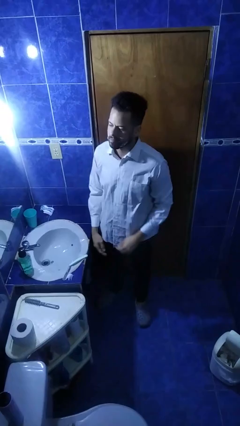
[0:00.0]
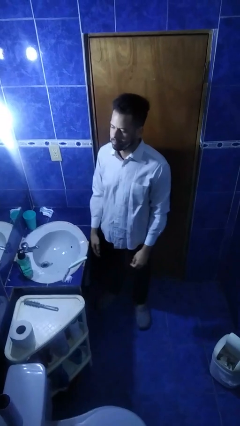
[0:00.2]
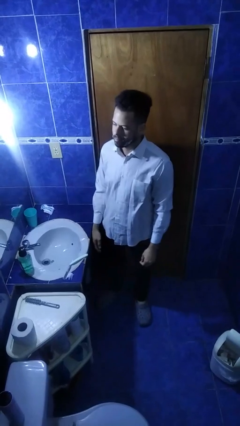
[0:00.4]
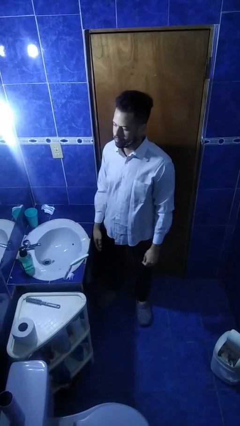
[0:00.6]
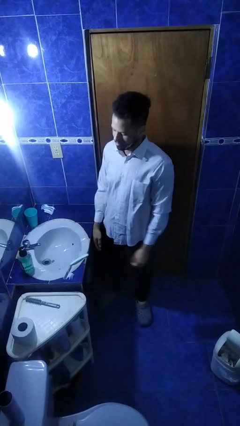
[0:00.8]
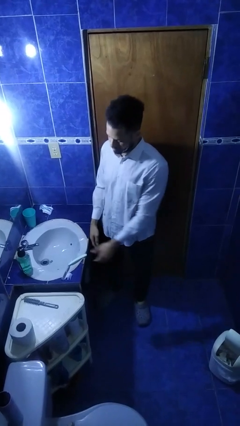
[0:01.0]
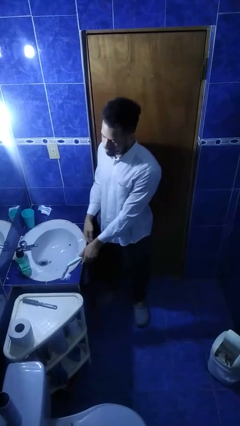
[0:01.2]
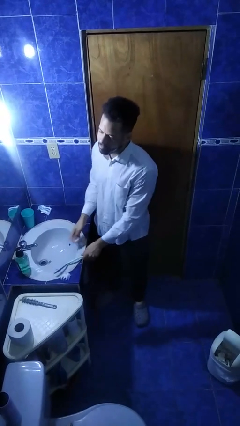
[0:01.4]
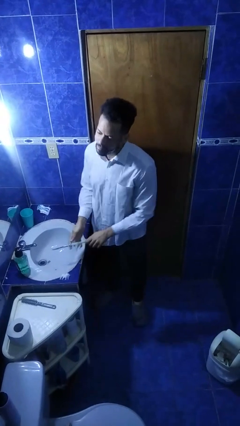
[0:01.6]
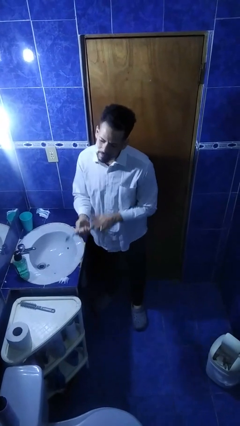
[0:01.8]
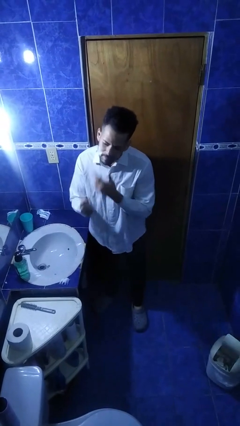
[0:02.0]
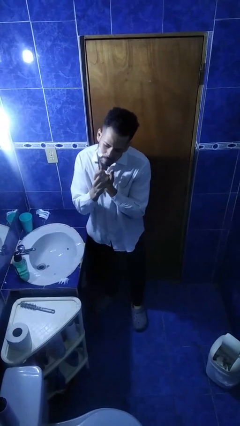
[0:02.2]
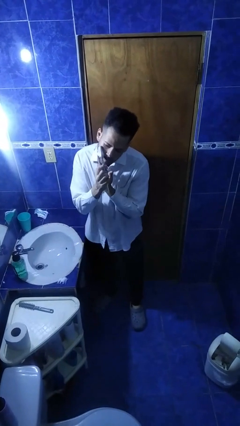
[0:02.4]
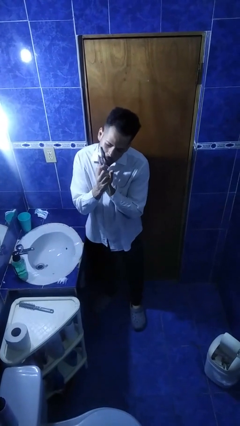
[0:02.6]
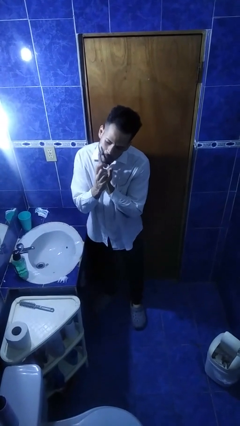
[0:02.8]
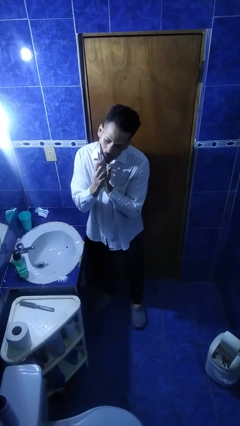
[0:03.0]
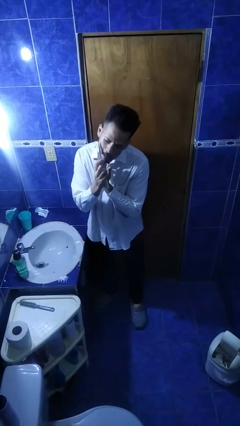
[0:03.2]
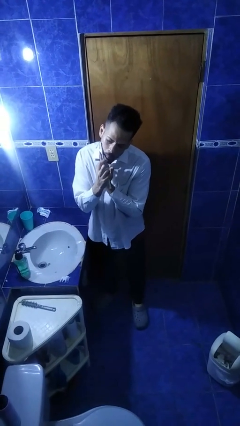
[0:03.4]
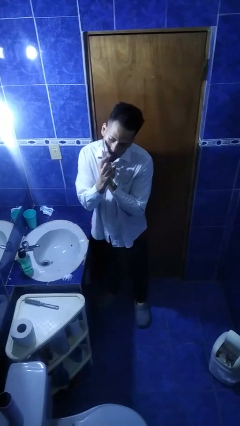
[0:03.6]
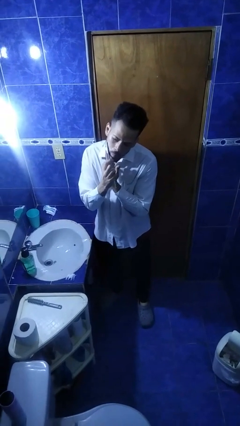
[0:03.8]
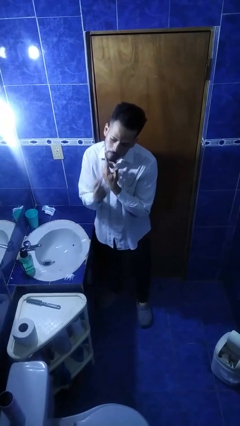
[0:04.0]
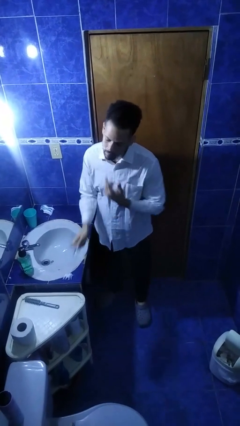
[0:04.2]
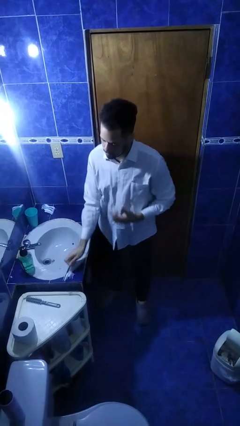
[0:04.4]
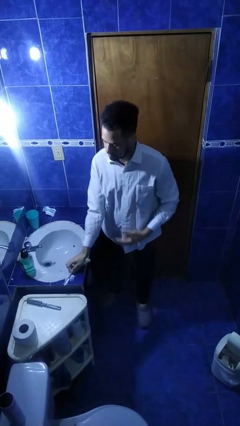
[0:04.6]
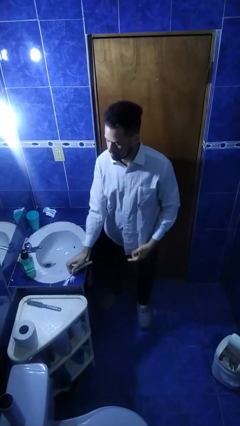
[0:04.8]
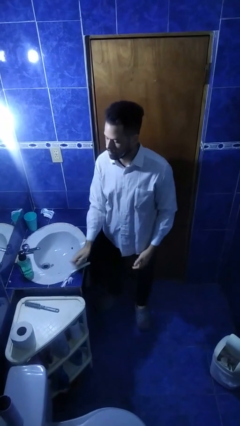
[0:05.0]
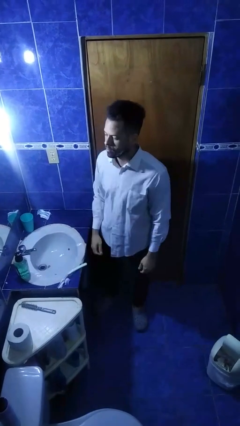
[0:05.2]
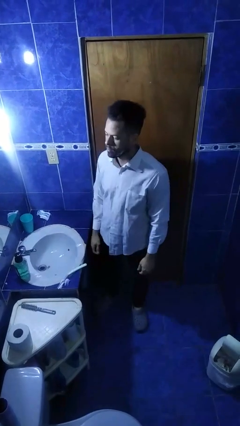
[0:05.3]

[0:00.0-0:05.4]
person shaves face

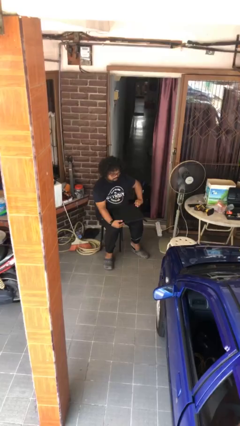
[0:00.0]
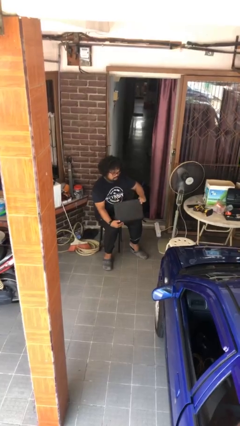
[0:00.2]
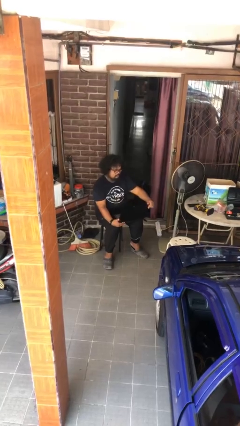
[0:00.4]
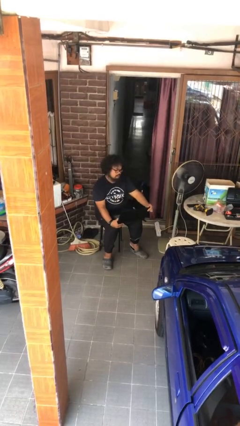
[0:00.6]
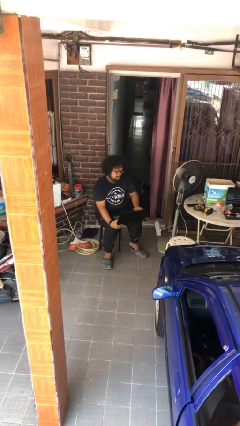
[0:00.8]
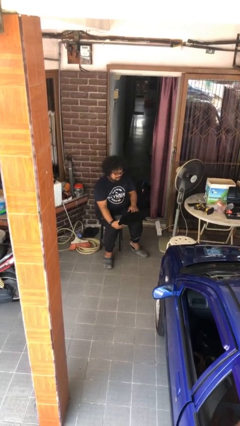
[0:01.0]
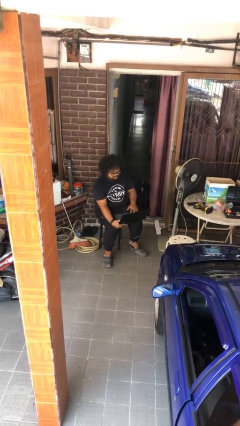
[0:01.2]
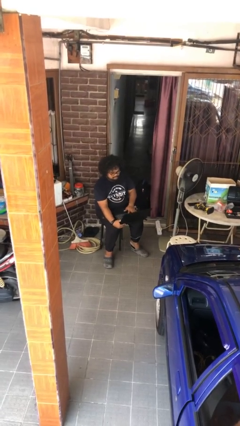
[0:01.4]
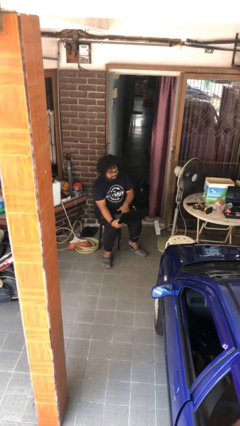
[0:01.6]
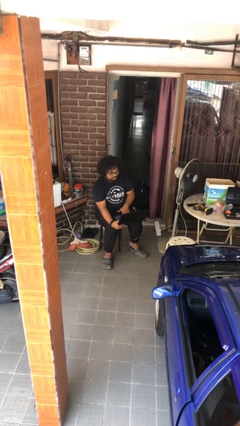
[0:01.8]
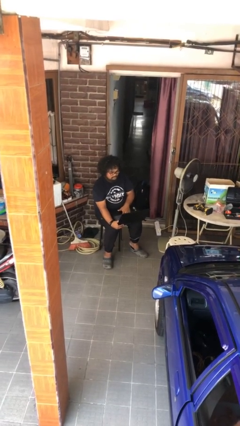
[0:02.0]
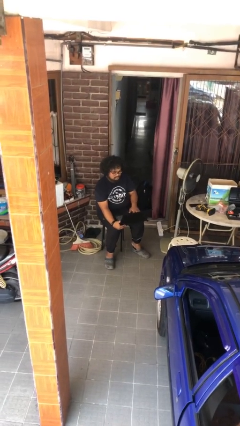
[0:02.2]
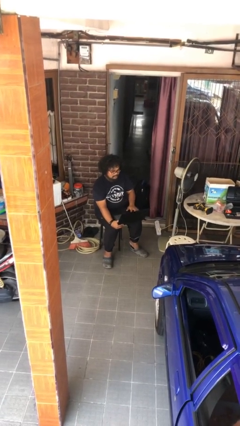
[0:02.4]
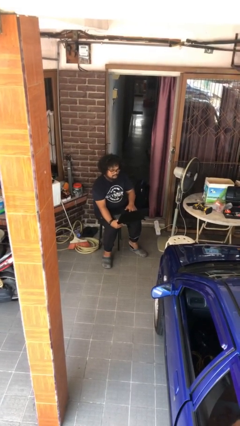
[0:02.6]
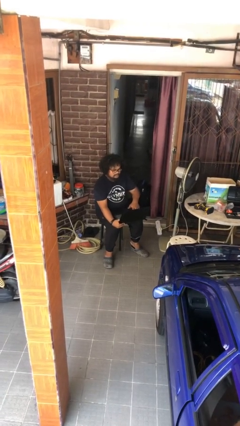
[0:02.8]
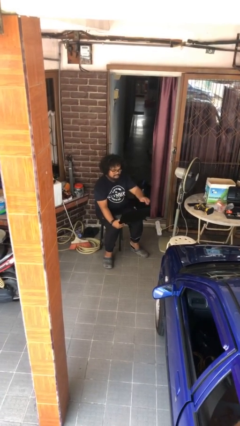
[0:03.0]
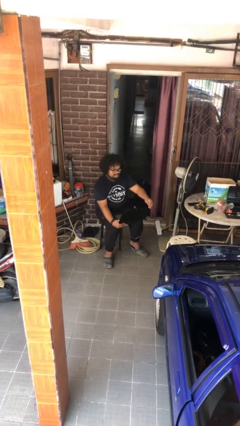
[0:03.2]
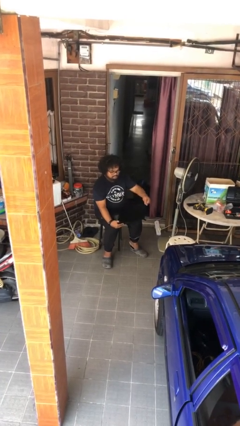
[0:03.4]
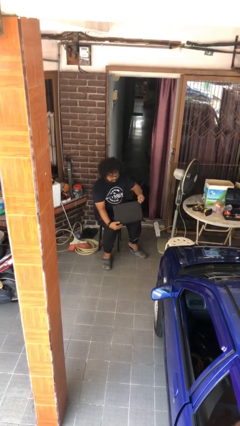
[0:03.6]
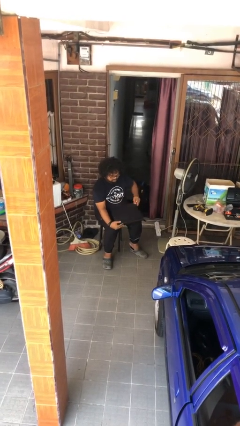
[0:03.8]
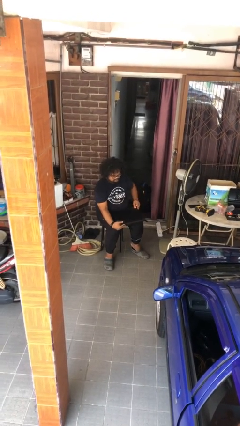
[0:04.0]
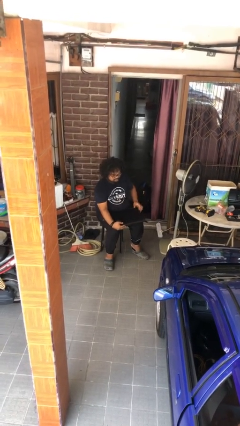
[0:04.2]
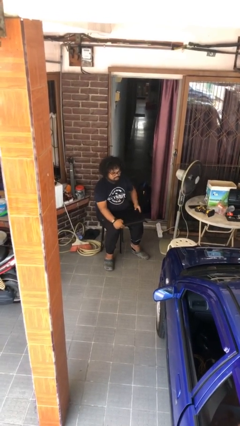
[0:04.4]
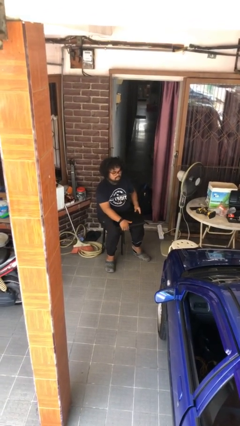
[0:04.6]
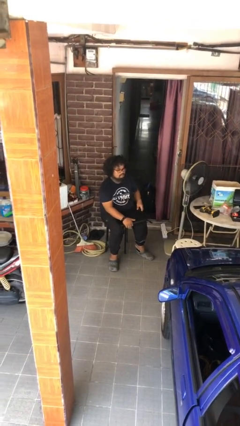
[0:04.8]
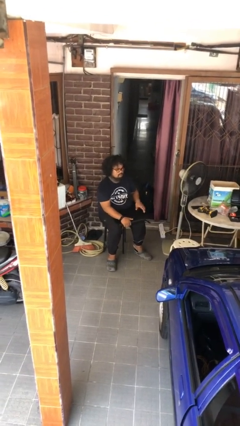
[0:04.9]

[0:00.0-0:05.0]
person interacts with laptop

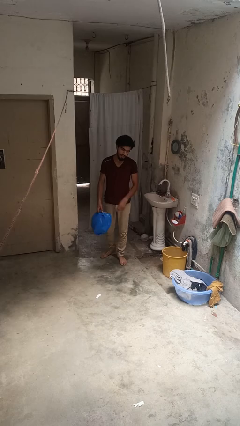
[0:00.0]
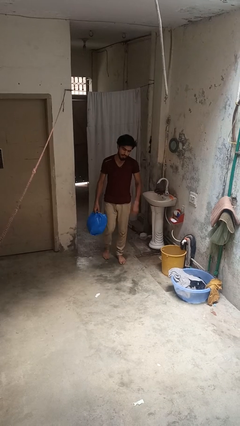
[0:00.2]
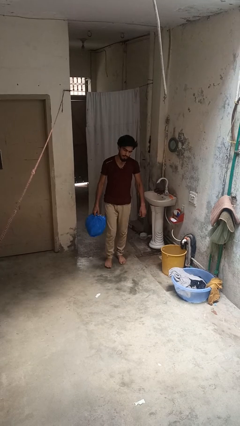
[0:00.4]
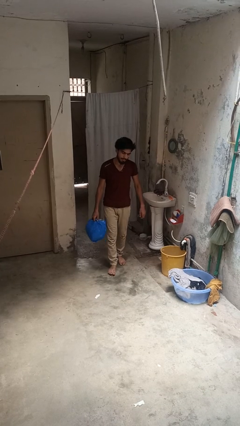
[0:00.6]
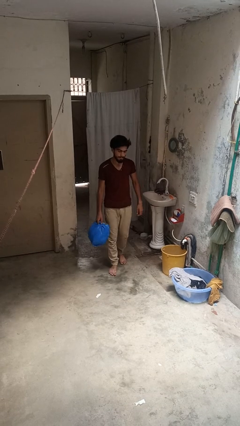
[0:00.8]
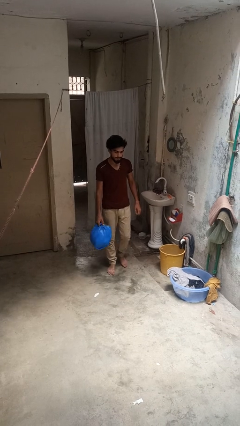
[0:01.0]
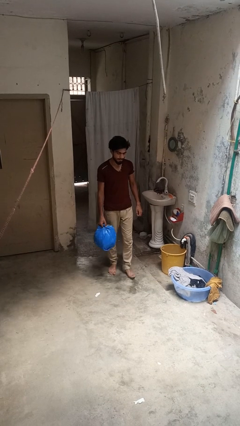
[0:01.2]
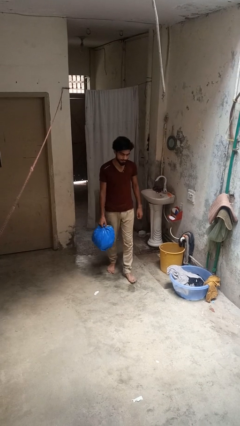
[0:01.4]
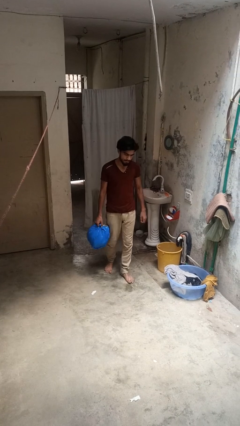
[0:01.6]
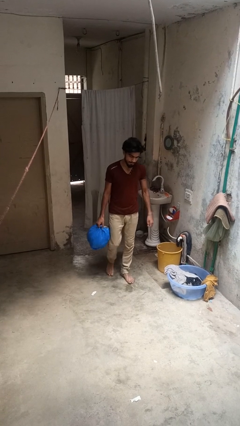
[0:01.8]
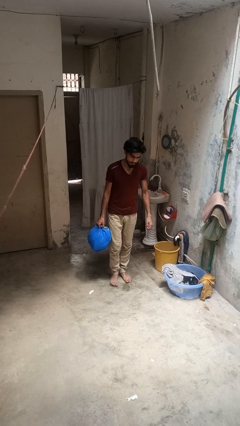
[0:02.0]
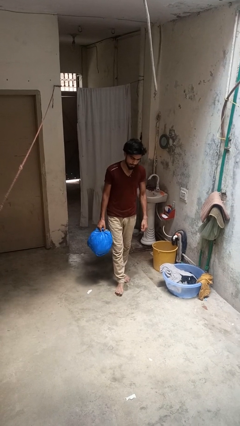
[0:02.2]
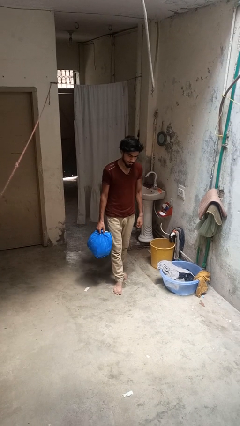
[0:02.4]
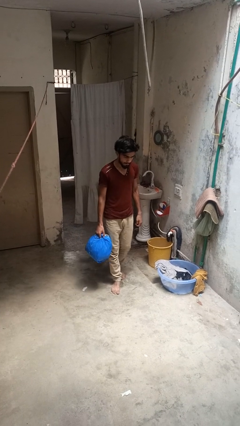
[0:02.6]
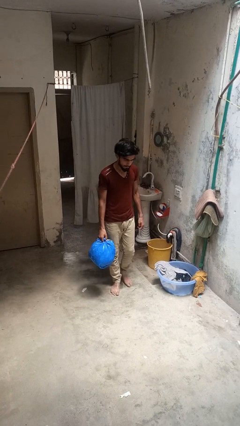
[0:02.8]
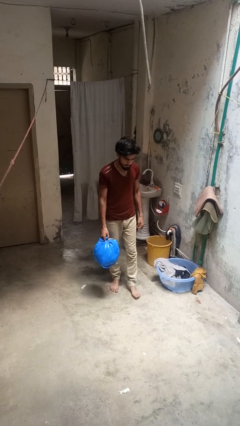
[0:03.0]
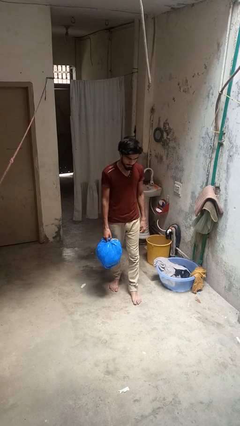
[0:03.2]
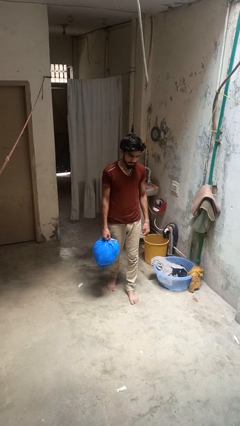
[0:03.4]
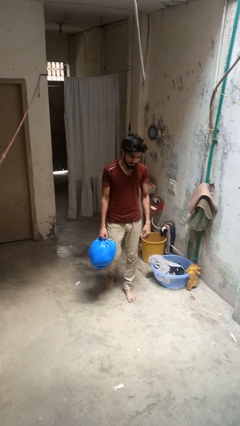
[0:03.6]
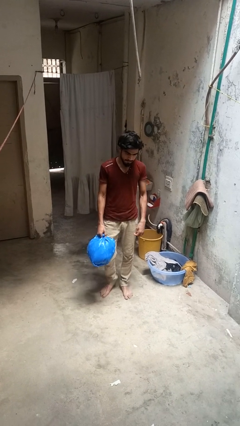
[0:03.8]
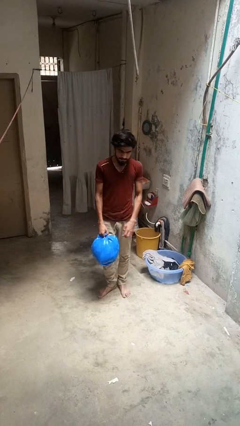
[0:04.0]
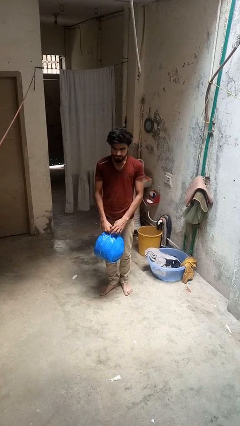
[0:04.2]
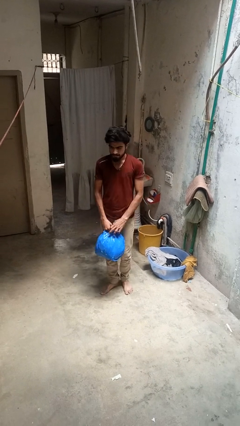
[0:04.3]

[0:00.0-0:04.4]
person carries groceries

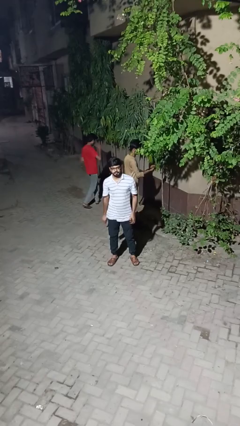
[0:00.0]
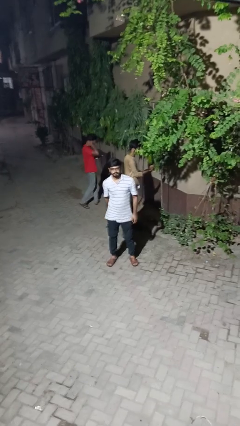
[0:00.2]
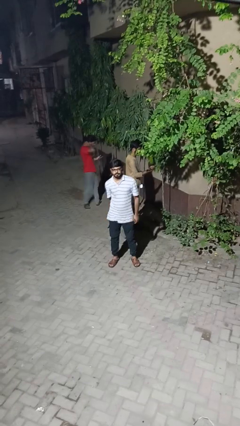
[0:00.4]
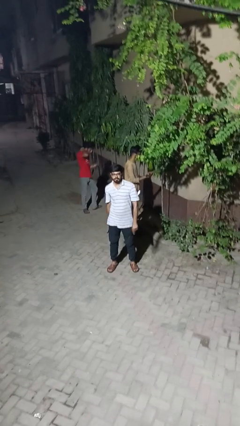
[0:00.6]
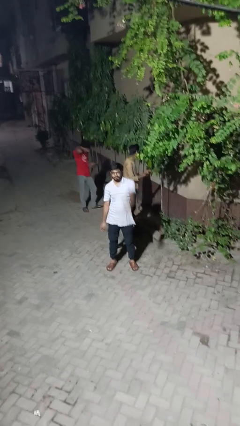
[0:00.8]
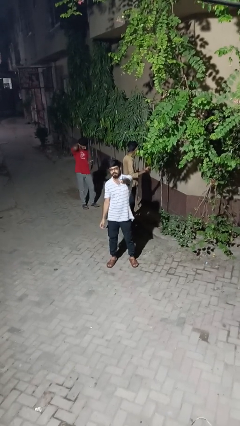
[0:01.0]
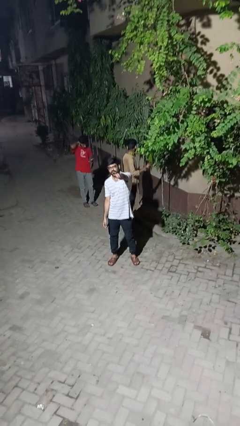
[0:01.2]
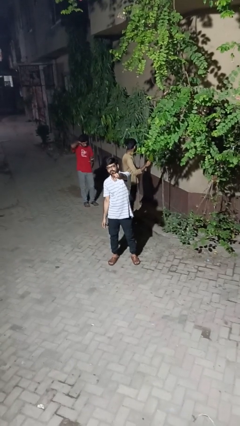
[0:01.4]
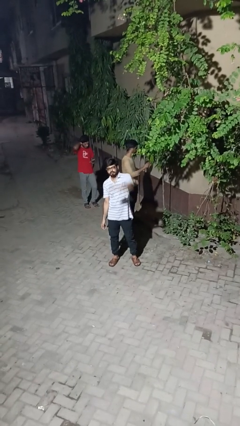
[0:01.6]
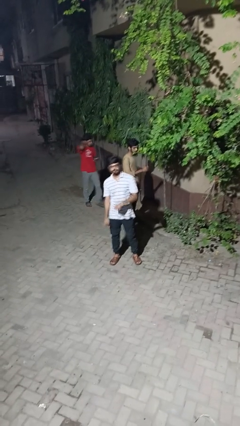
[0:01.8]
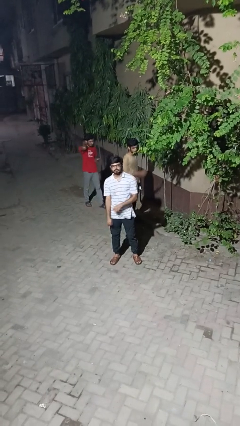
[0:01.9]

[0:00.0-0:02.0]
person points at person

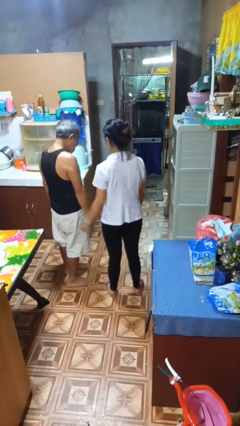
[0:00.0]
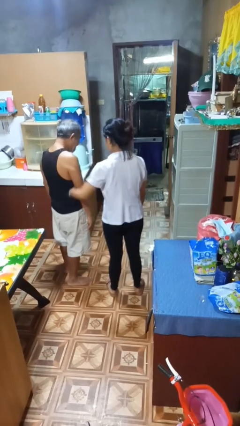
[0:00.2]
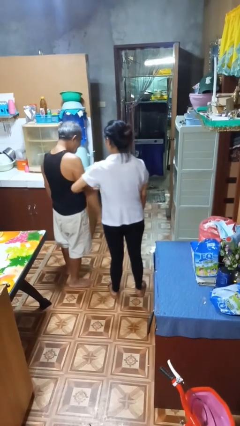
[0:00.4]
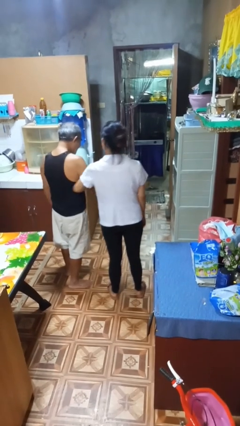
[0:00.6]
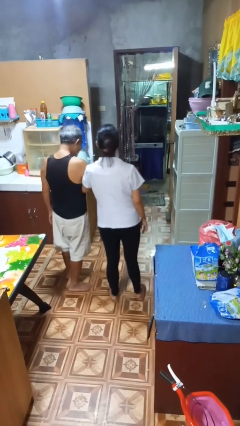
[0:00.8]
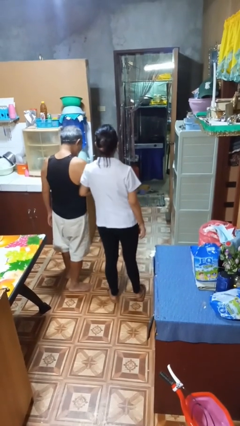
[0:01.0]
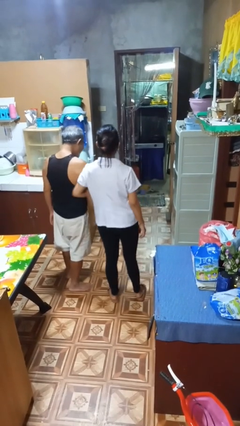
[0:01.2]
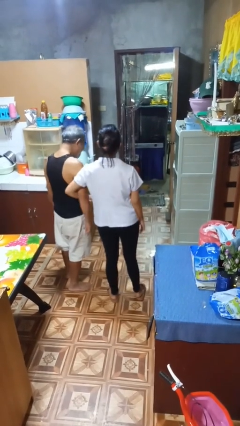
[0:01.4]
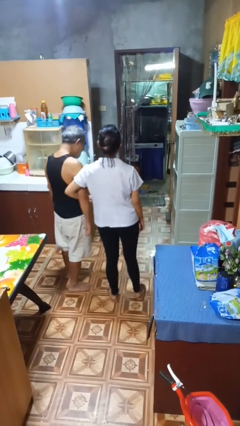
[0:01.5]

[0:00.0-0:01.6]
person grabs person by forearm
